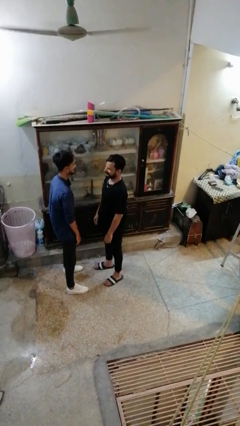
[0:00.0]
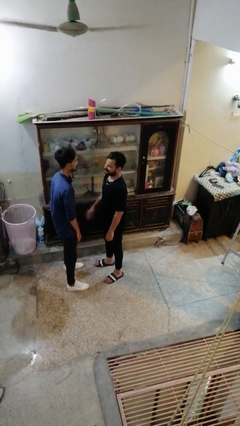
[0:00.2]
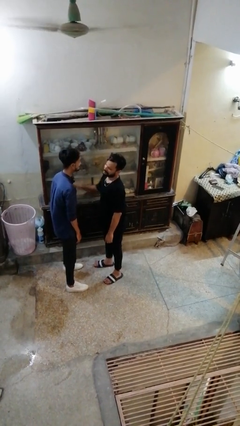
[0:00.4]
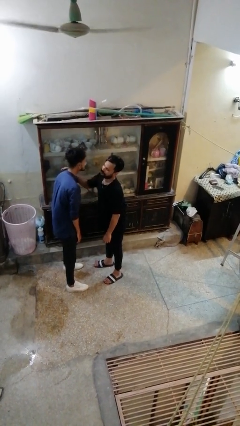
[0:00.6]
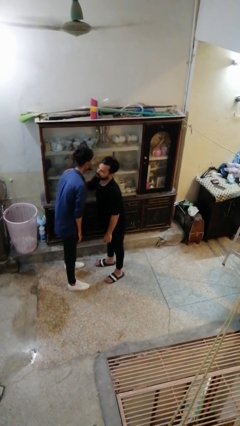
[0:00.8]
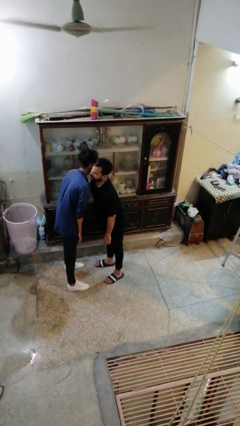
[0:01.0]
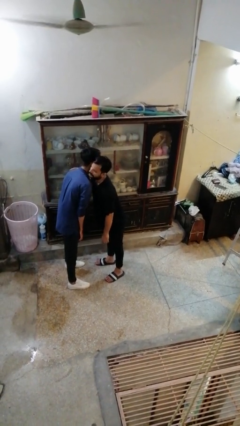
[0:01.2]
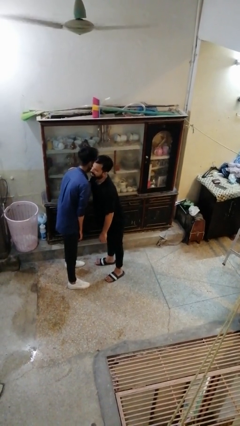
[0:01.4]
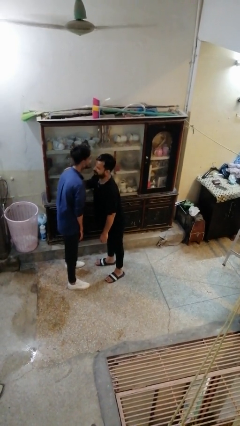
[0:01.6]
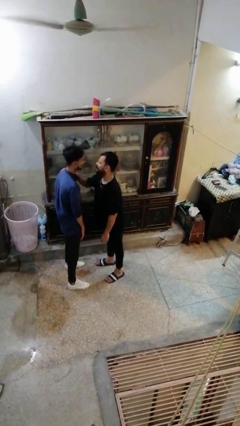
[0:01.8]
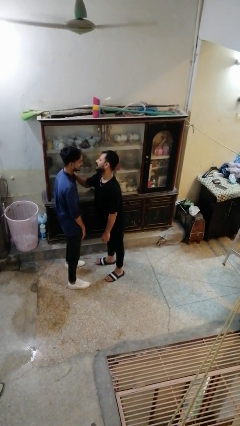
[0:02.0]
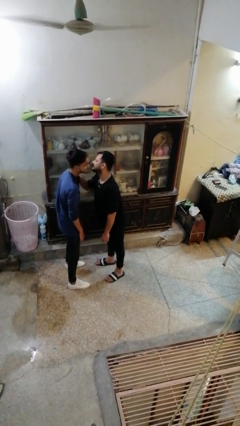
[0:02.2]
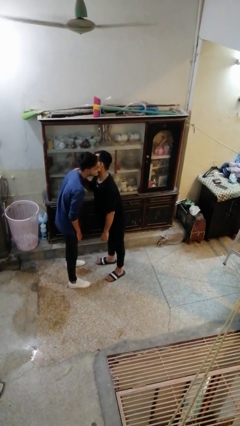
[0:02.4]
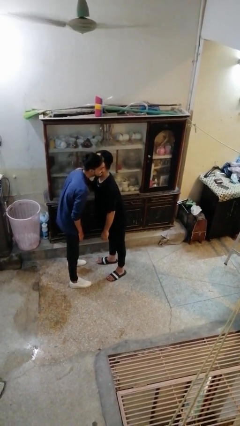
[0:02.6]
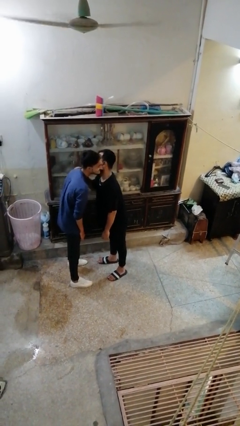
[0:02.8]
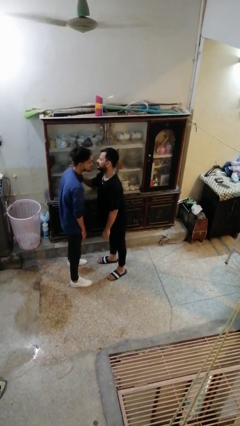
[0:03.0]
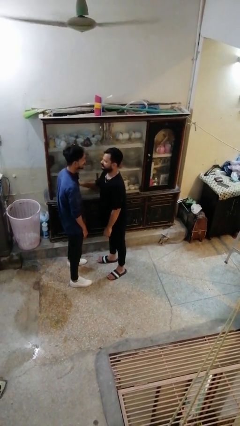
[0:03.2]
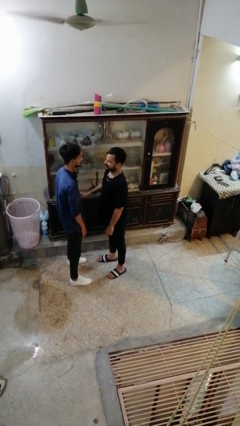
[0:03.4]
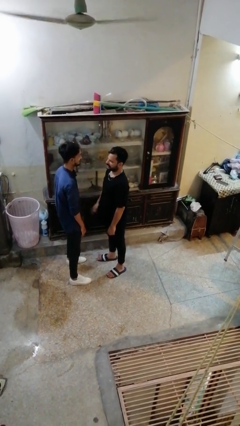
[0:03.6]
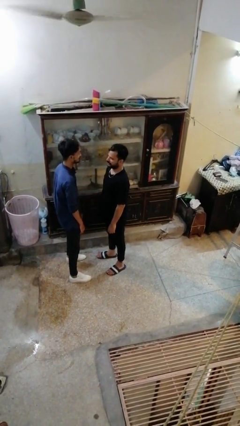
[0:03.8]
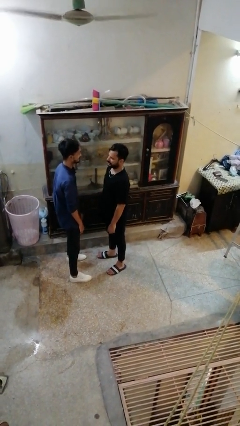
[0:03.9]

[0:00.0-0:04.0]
person kisses cheek of person

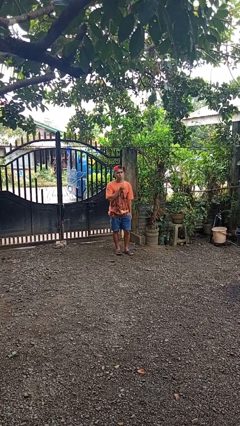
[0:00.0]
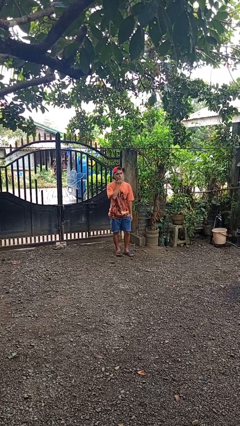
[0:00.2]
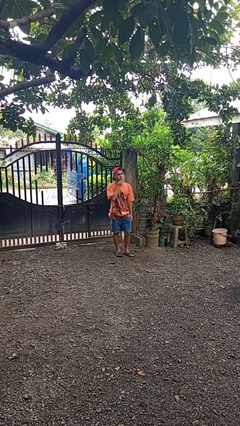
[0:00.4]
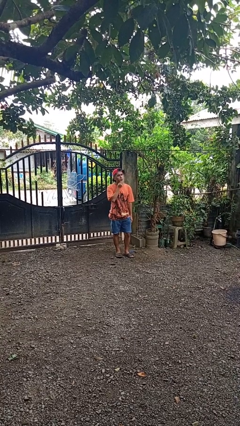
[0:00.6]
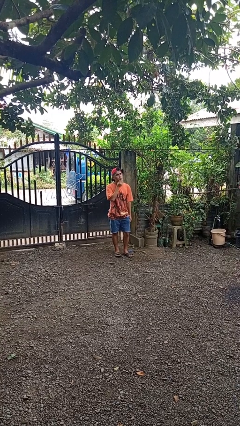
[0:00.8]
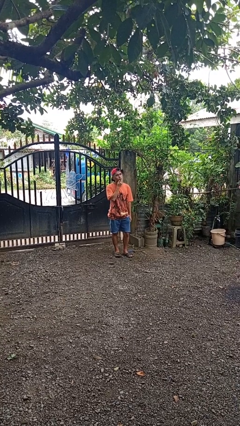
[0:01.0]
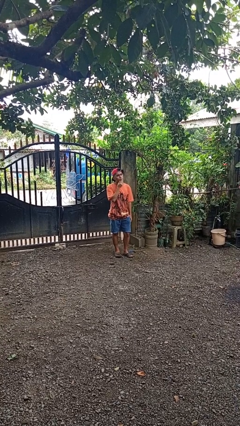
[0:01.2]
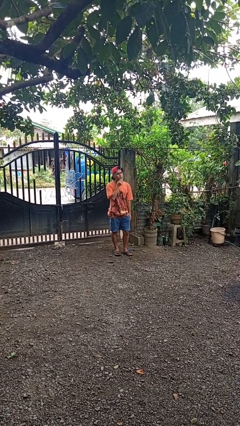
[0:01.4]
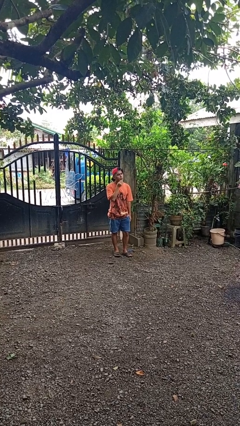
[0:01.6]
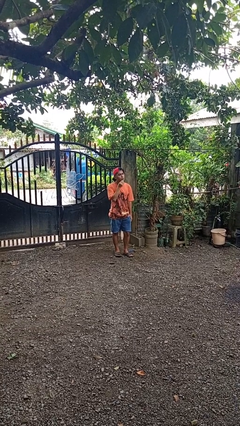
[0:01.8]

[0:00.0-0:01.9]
person strokes chin

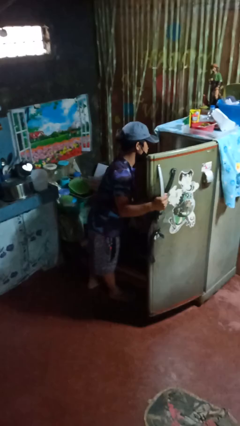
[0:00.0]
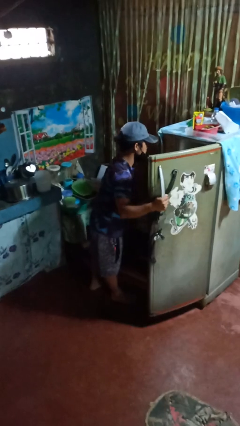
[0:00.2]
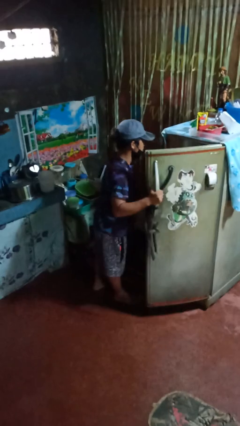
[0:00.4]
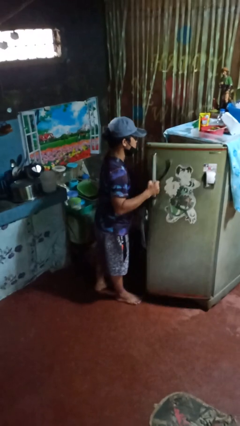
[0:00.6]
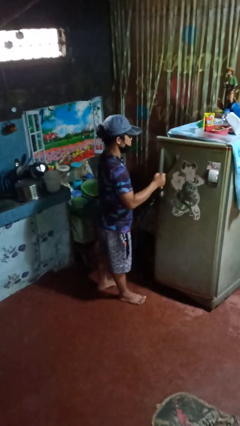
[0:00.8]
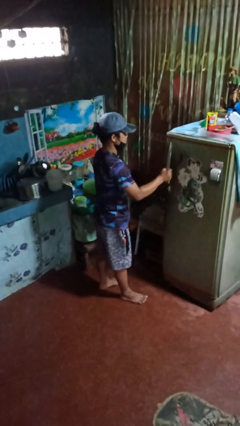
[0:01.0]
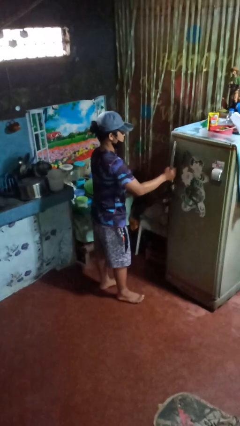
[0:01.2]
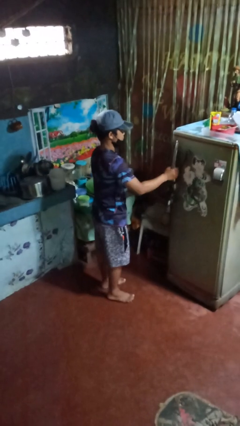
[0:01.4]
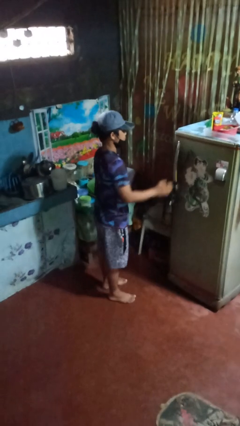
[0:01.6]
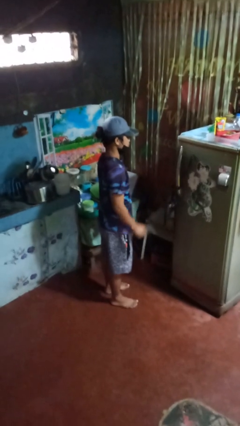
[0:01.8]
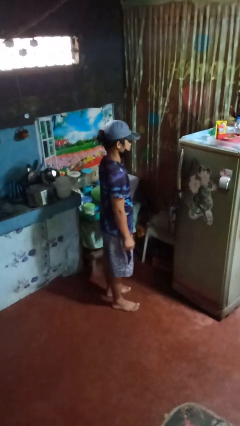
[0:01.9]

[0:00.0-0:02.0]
person closes refrigerator

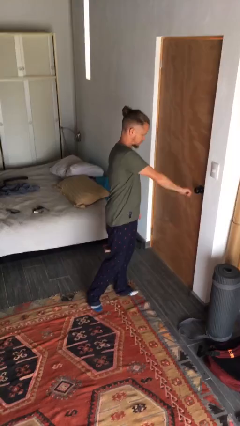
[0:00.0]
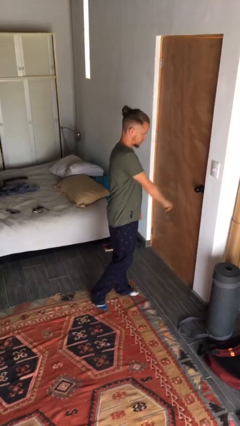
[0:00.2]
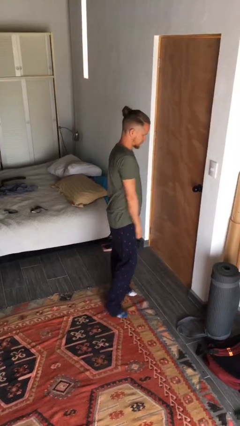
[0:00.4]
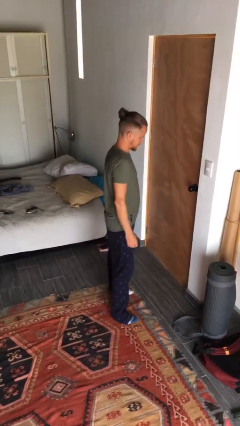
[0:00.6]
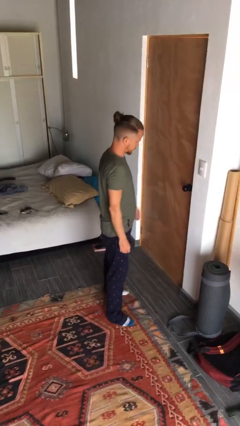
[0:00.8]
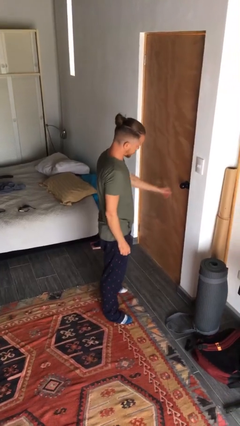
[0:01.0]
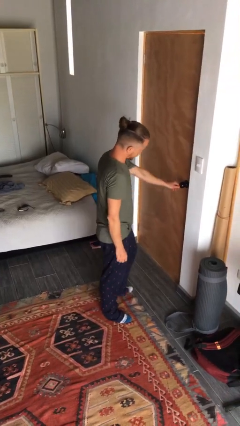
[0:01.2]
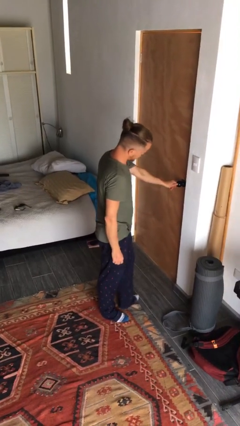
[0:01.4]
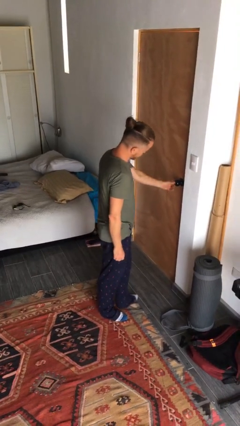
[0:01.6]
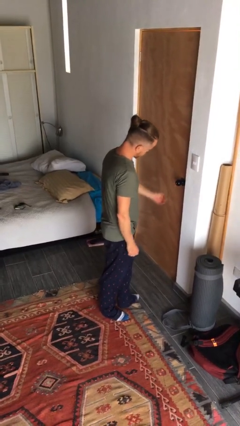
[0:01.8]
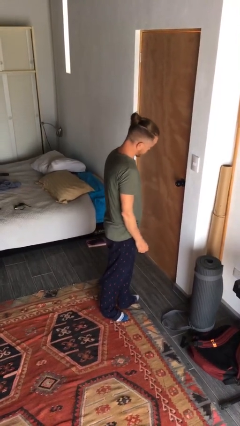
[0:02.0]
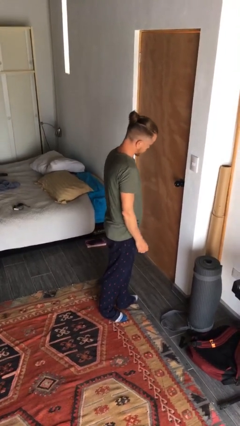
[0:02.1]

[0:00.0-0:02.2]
person unlocks door with keys

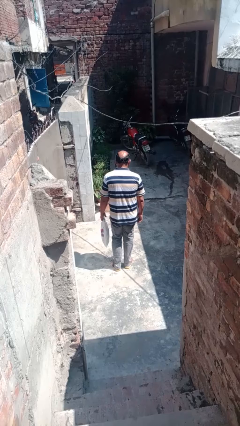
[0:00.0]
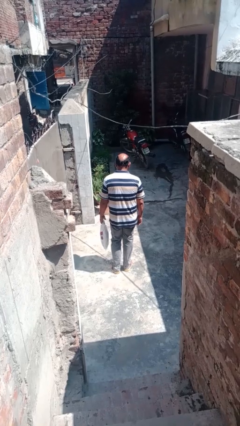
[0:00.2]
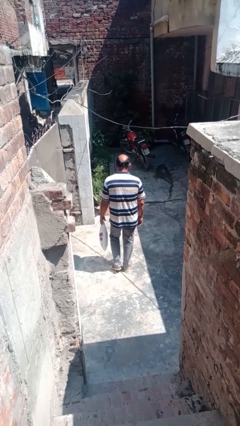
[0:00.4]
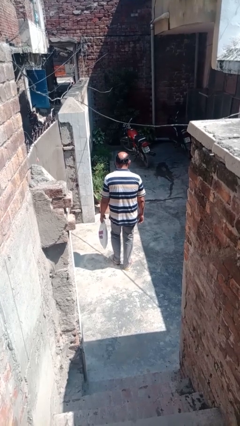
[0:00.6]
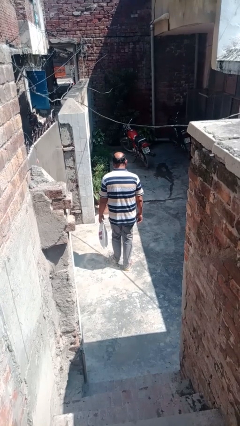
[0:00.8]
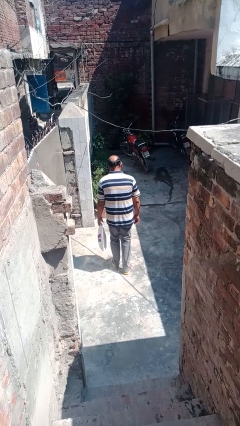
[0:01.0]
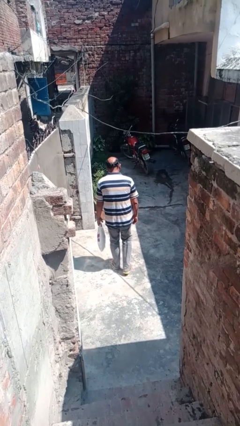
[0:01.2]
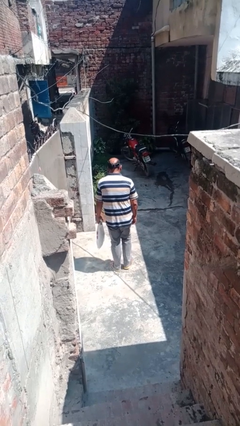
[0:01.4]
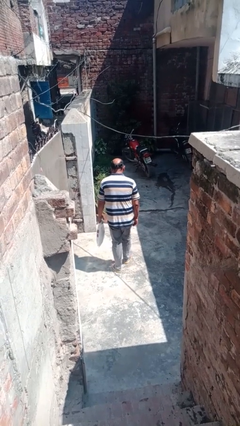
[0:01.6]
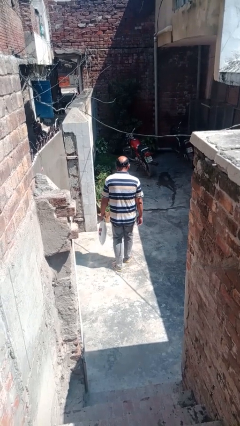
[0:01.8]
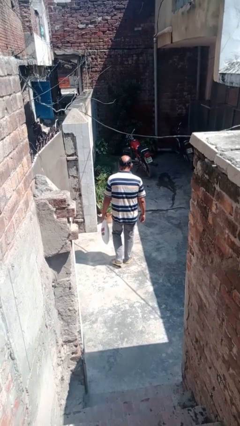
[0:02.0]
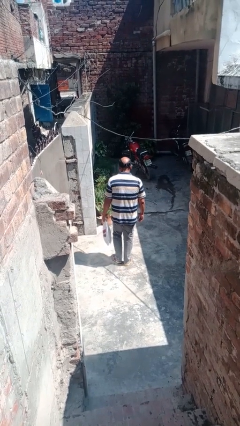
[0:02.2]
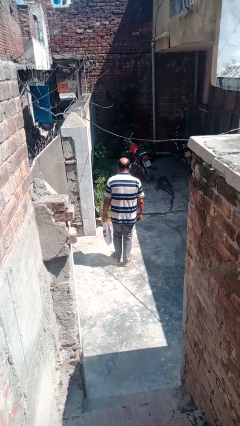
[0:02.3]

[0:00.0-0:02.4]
person carries groceries

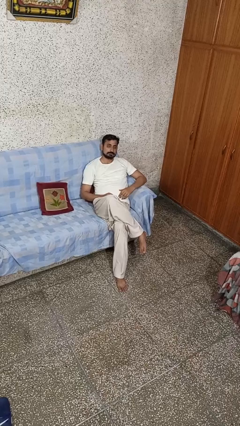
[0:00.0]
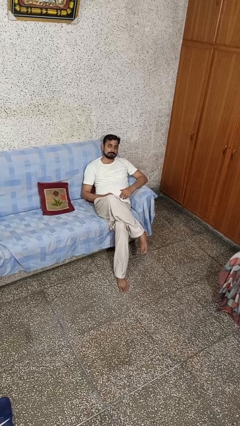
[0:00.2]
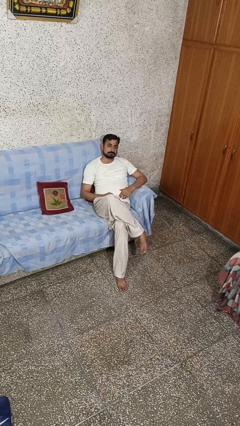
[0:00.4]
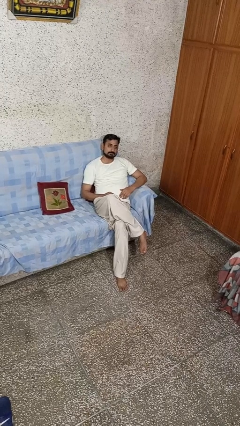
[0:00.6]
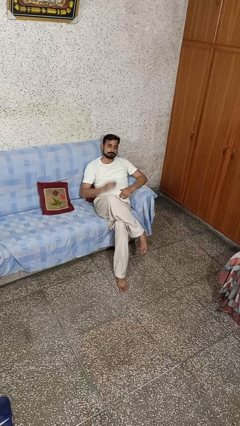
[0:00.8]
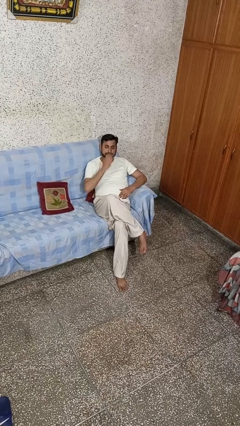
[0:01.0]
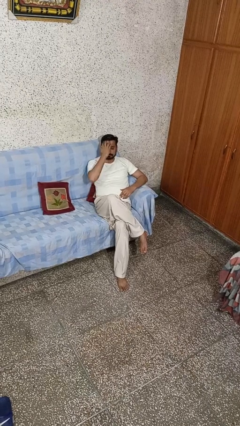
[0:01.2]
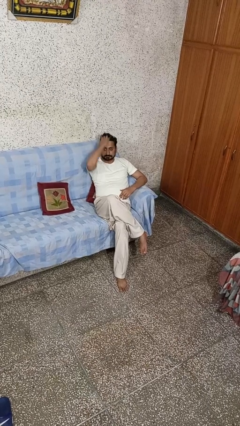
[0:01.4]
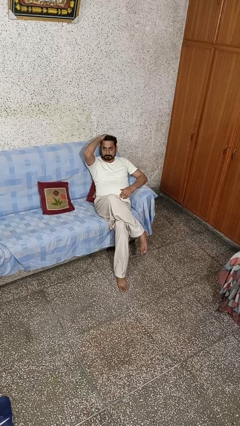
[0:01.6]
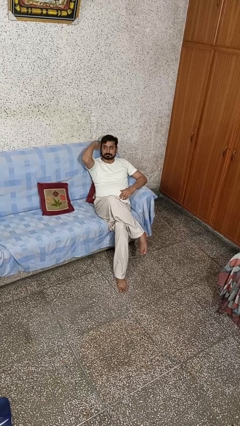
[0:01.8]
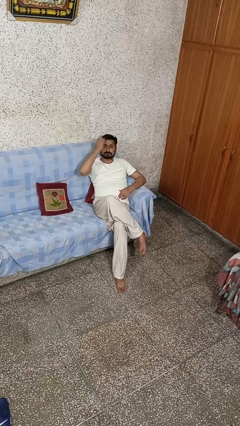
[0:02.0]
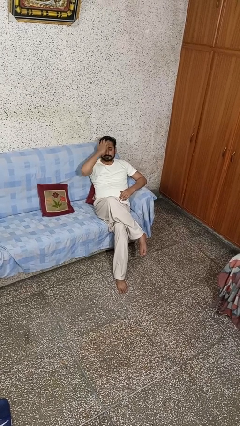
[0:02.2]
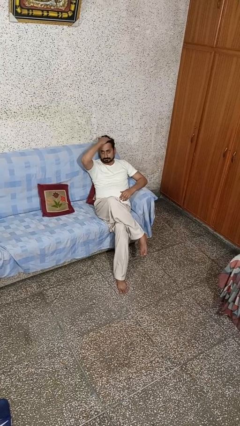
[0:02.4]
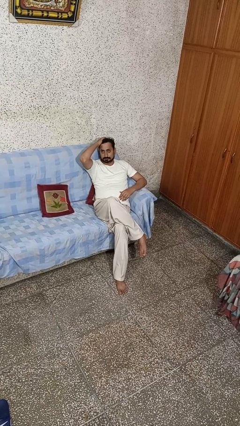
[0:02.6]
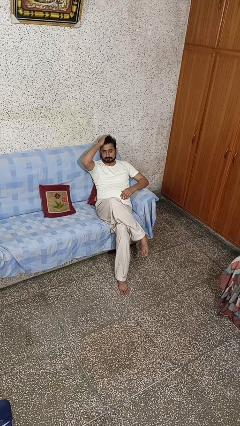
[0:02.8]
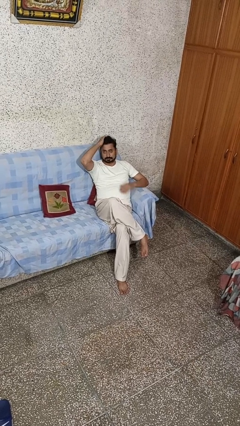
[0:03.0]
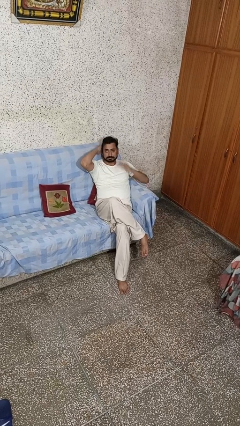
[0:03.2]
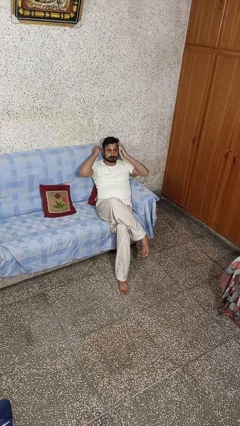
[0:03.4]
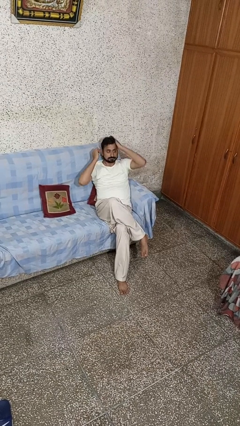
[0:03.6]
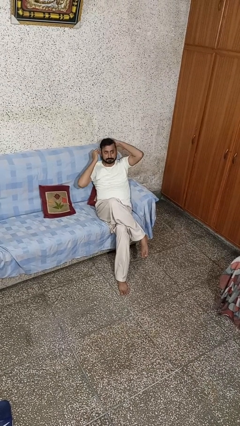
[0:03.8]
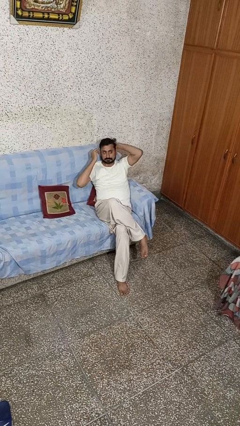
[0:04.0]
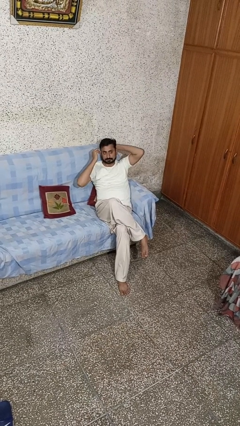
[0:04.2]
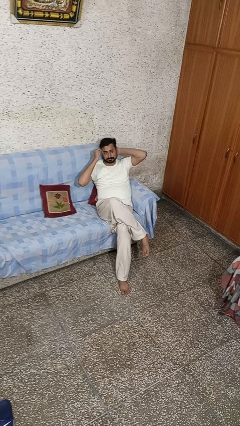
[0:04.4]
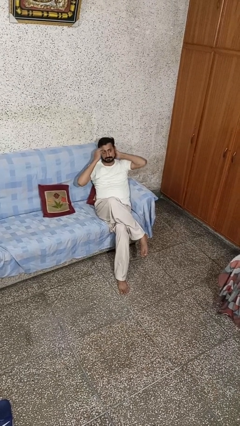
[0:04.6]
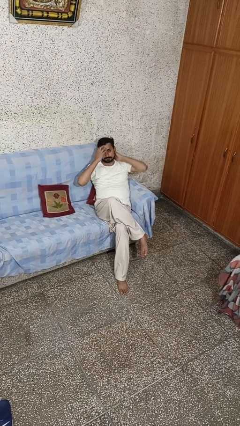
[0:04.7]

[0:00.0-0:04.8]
person strokes hair
